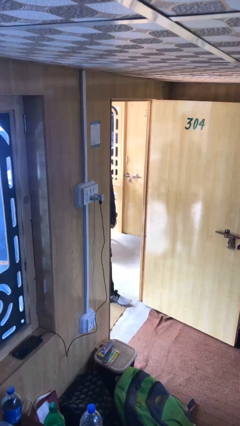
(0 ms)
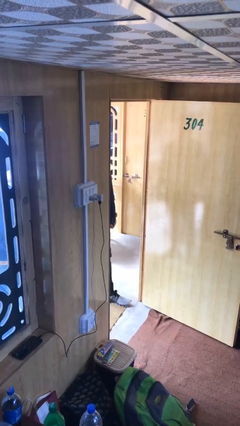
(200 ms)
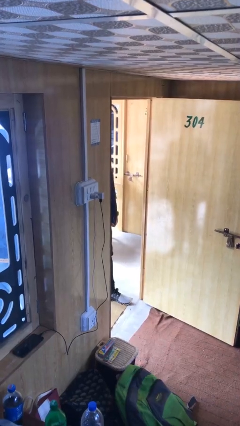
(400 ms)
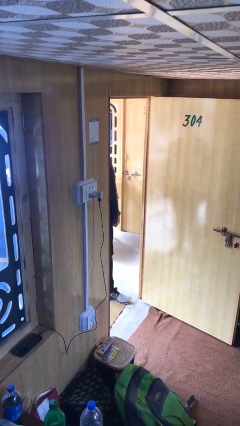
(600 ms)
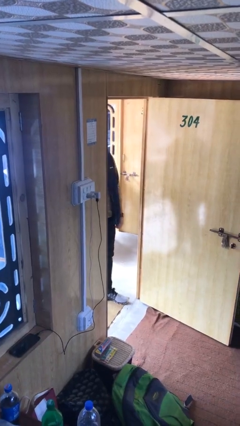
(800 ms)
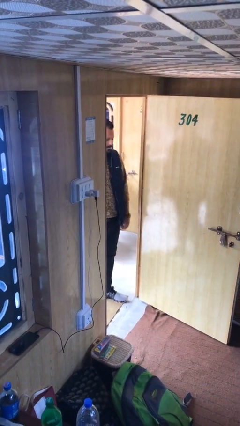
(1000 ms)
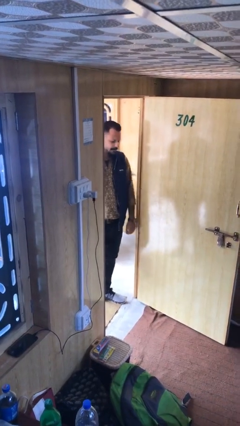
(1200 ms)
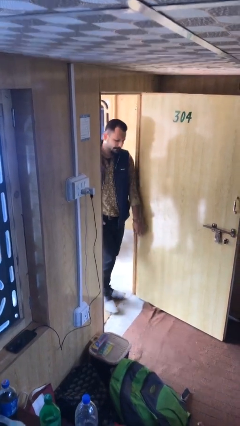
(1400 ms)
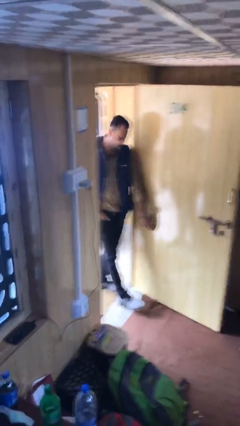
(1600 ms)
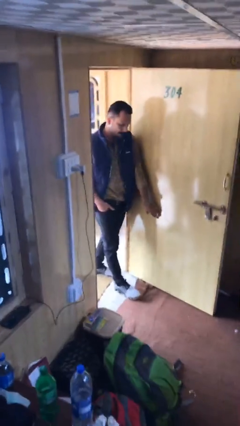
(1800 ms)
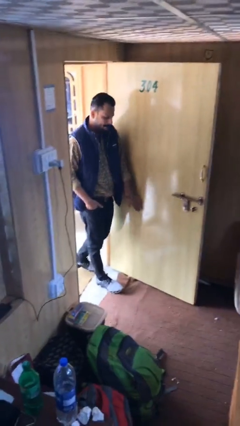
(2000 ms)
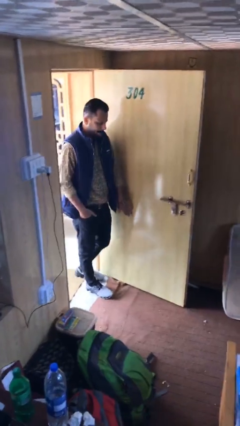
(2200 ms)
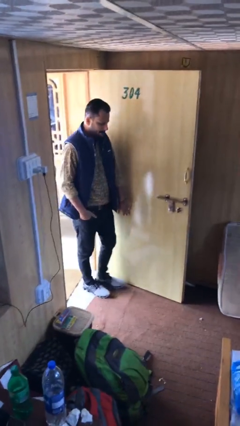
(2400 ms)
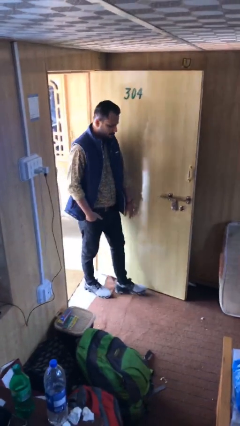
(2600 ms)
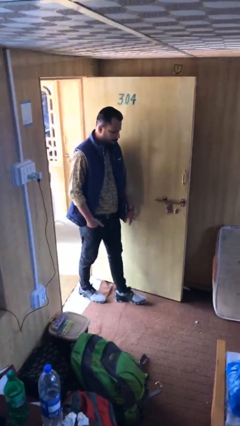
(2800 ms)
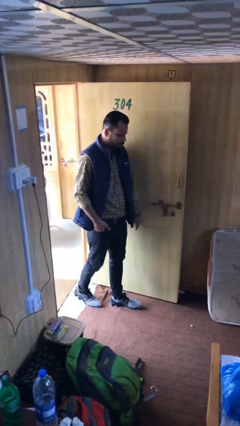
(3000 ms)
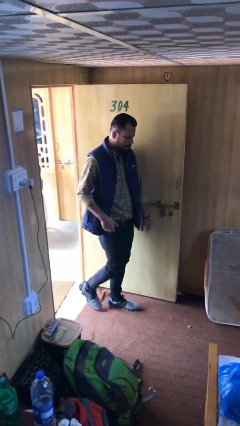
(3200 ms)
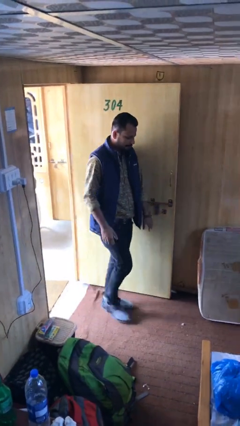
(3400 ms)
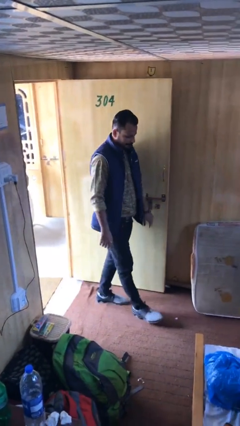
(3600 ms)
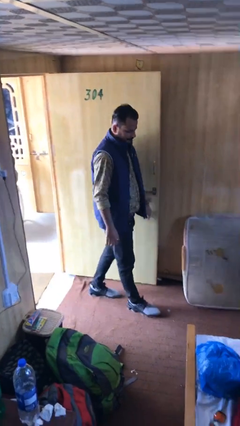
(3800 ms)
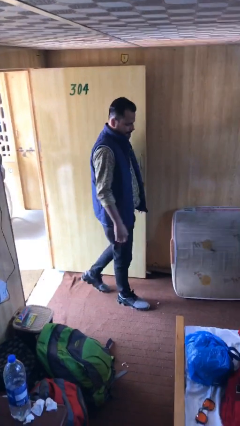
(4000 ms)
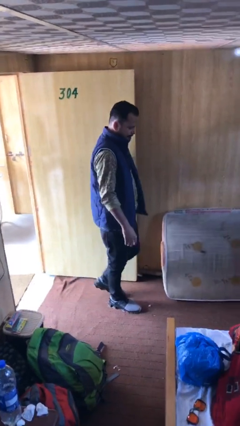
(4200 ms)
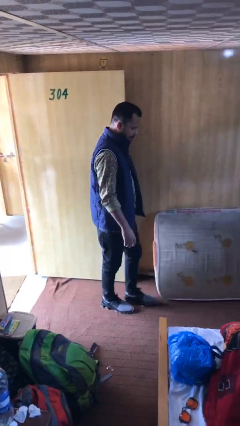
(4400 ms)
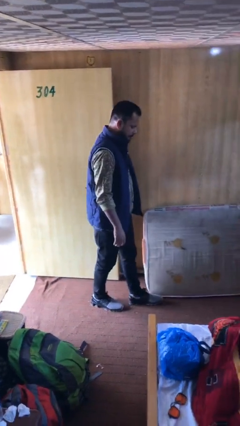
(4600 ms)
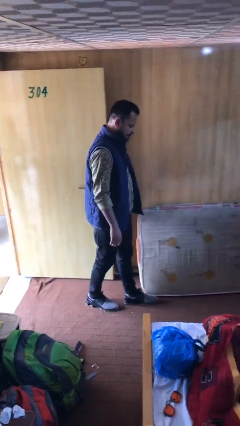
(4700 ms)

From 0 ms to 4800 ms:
person enters scene through structure

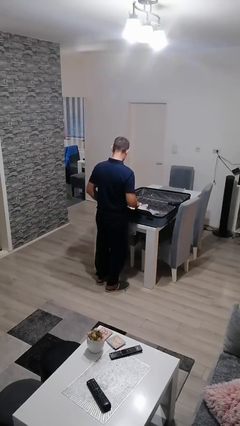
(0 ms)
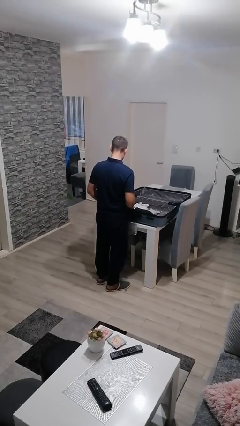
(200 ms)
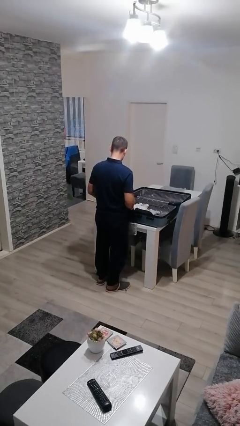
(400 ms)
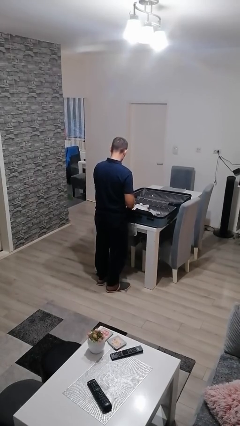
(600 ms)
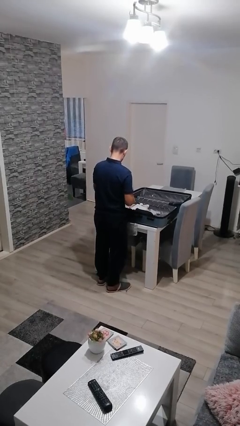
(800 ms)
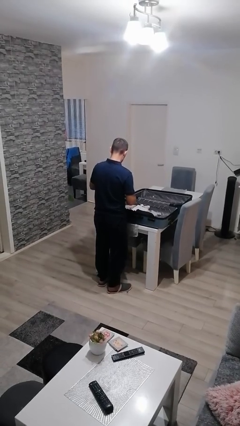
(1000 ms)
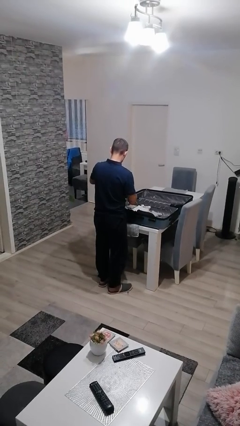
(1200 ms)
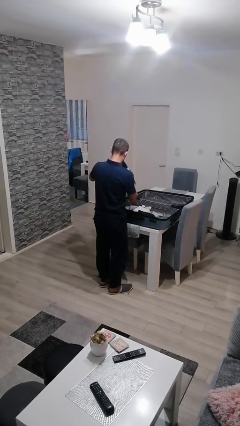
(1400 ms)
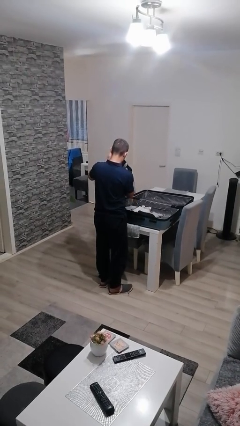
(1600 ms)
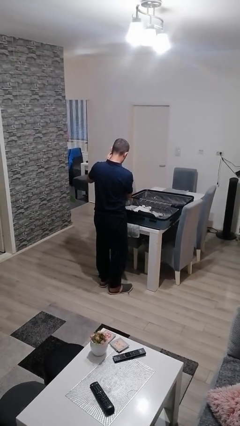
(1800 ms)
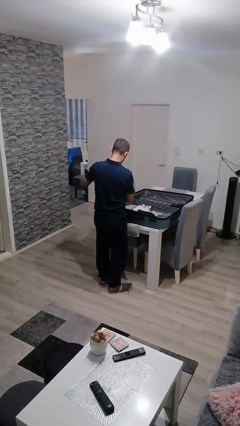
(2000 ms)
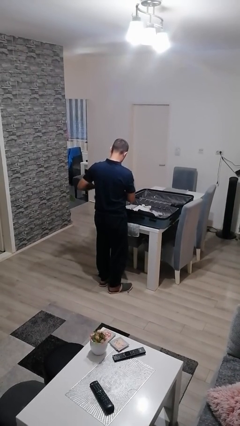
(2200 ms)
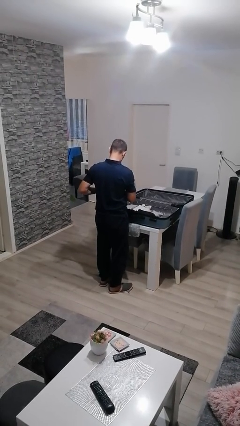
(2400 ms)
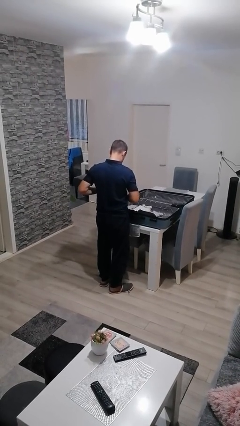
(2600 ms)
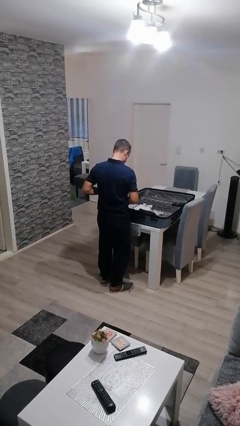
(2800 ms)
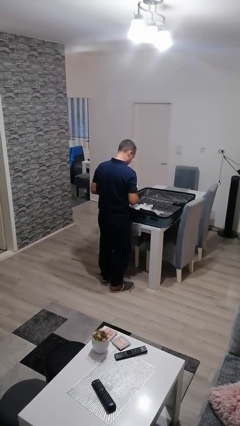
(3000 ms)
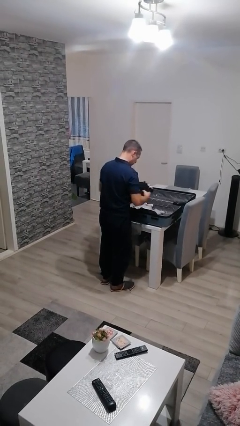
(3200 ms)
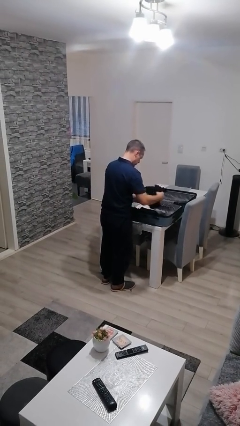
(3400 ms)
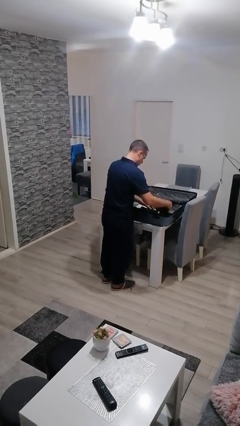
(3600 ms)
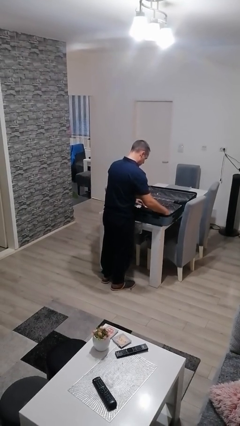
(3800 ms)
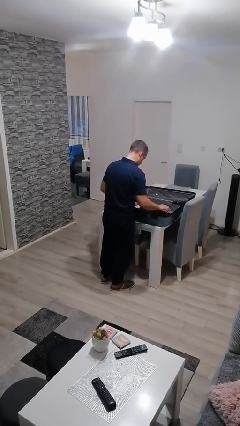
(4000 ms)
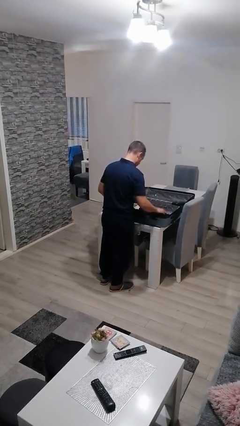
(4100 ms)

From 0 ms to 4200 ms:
person loads clothes into suitcase

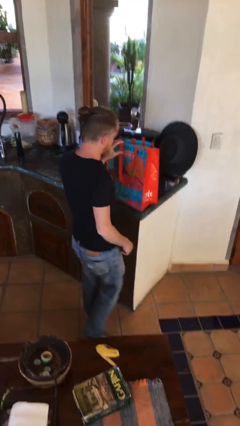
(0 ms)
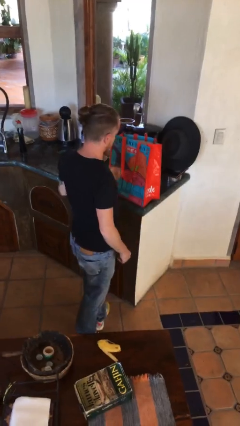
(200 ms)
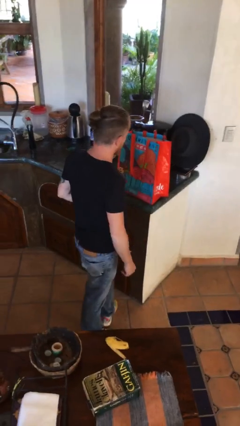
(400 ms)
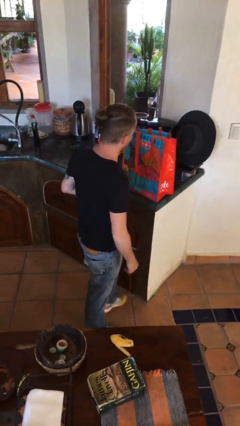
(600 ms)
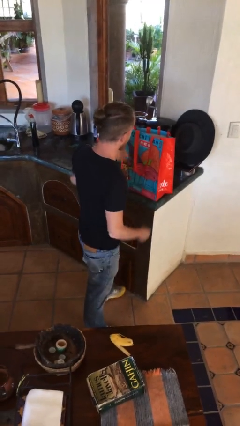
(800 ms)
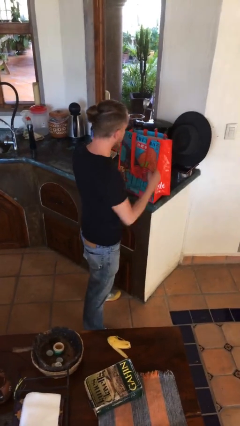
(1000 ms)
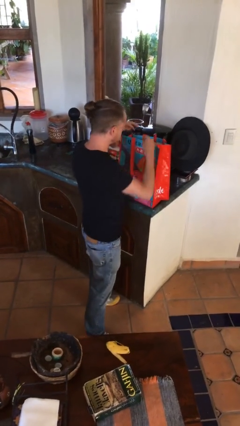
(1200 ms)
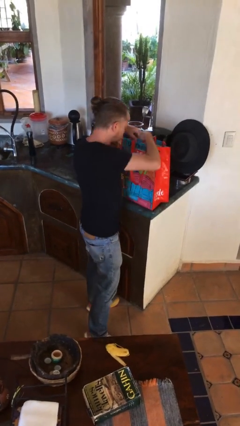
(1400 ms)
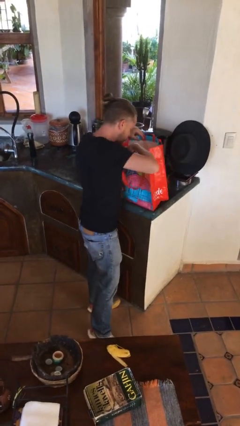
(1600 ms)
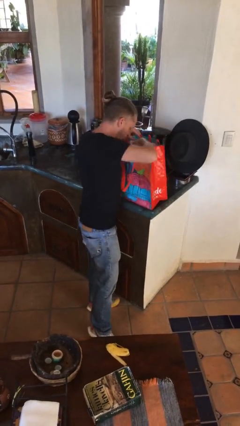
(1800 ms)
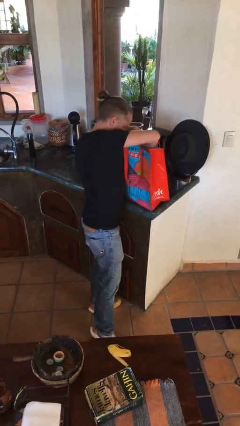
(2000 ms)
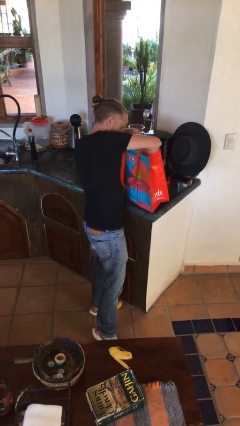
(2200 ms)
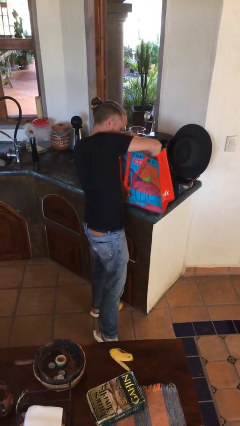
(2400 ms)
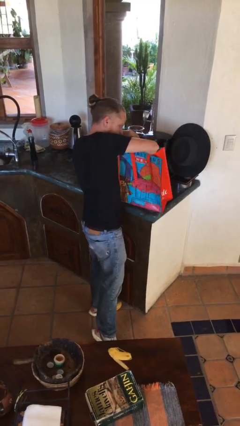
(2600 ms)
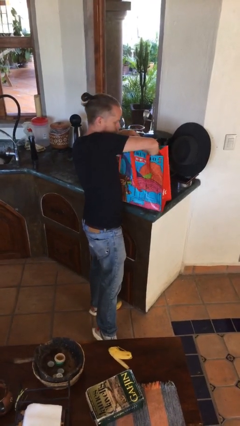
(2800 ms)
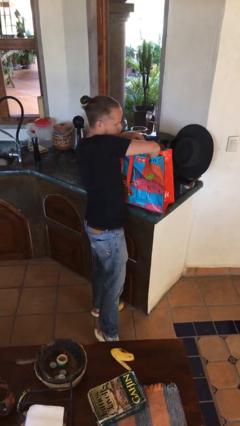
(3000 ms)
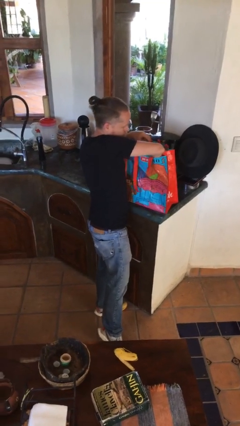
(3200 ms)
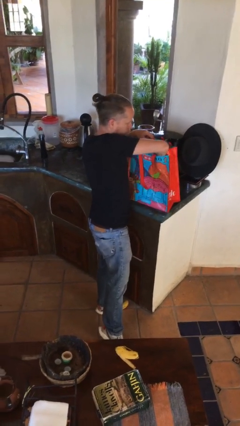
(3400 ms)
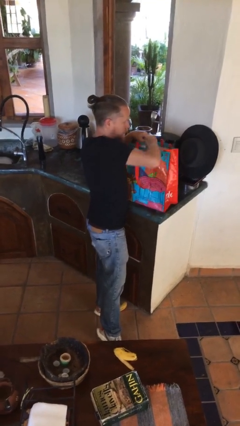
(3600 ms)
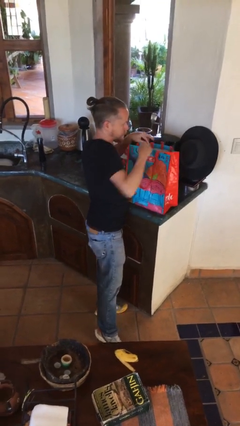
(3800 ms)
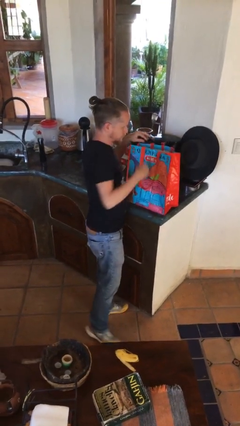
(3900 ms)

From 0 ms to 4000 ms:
person searches in bag

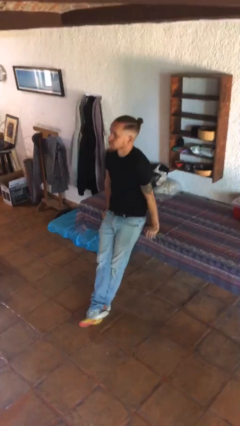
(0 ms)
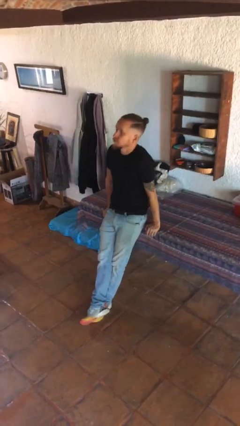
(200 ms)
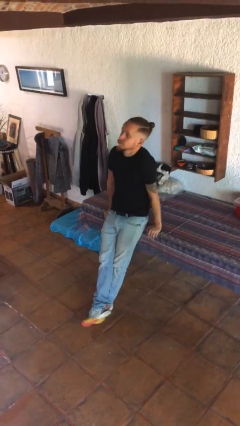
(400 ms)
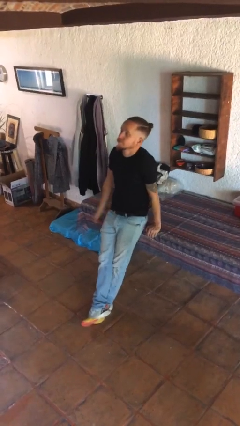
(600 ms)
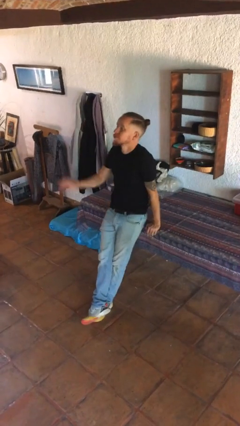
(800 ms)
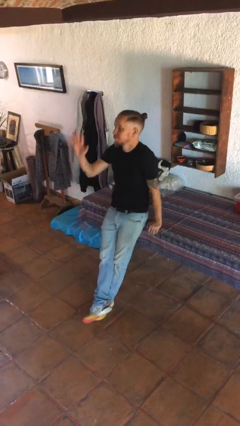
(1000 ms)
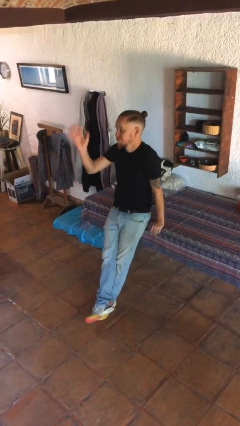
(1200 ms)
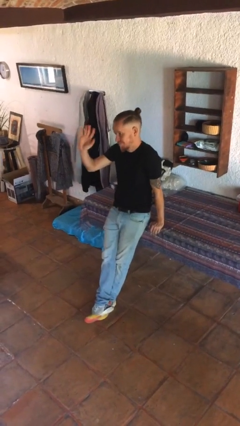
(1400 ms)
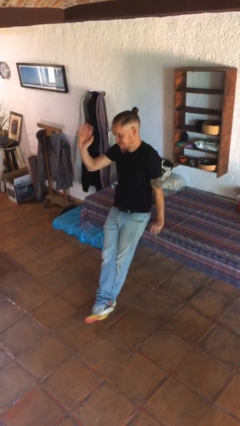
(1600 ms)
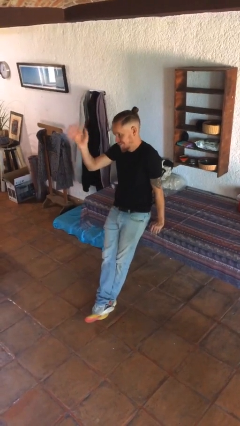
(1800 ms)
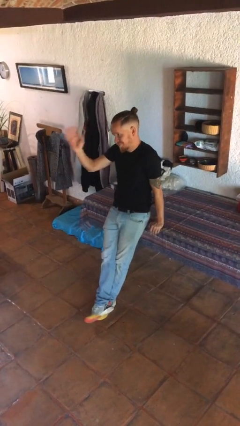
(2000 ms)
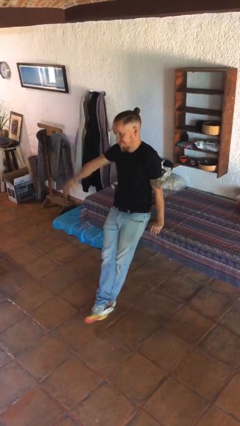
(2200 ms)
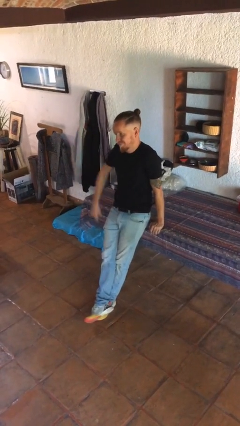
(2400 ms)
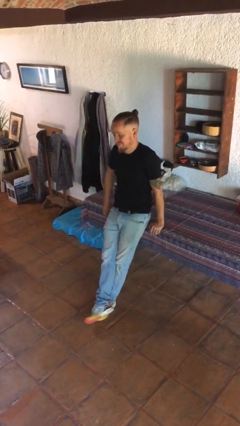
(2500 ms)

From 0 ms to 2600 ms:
person waves at person

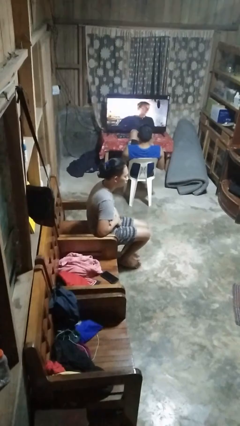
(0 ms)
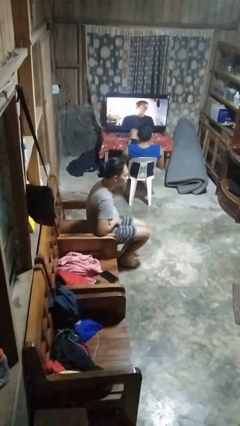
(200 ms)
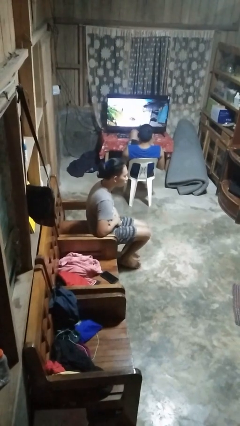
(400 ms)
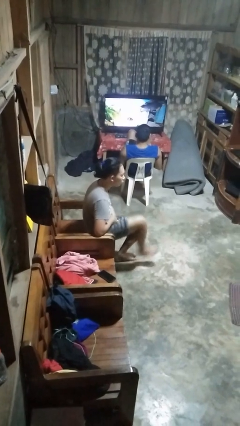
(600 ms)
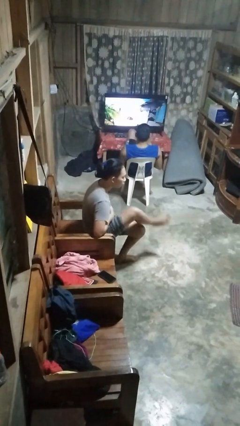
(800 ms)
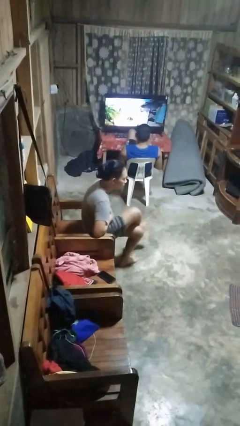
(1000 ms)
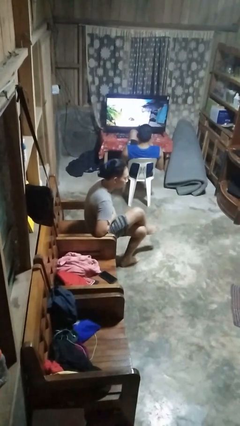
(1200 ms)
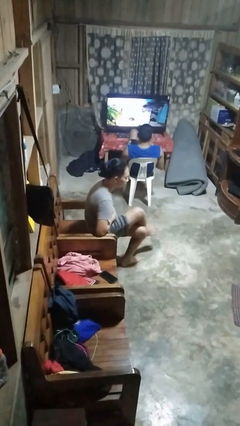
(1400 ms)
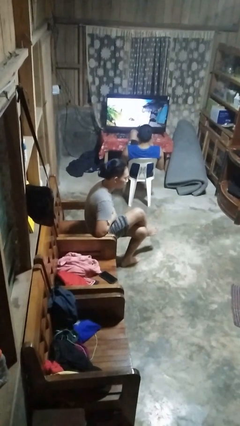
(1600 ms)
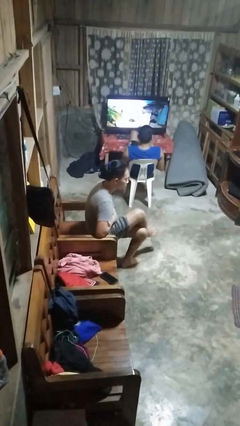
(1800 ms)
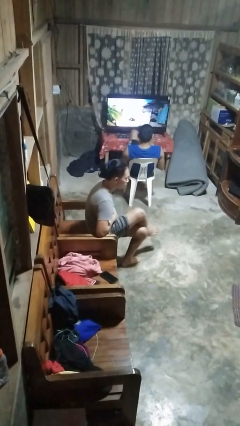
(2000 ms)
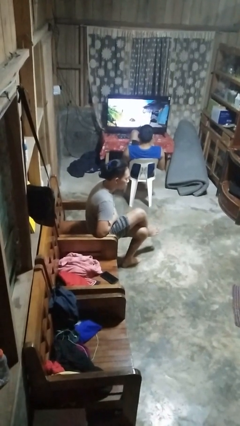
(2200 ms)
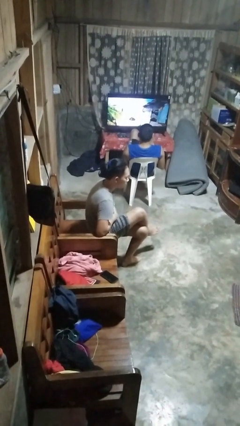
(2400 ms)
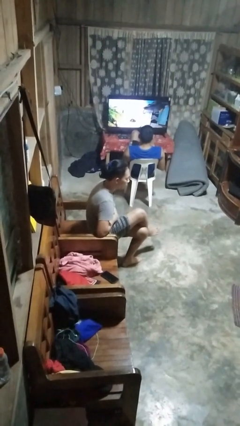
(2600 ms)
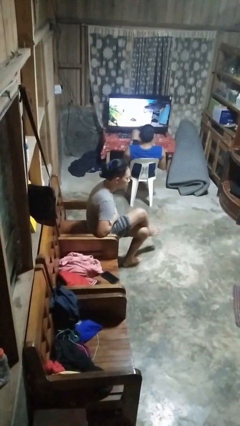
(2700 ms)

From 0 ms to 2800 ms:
person crosses legs
